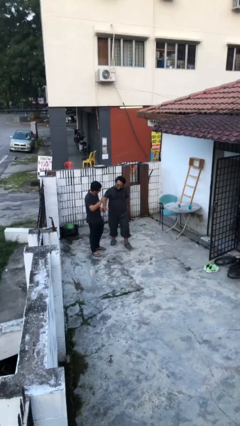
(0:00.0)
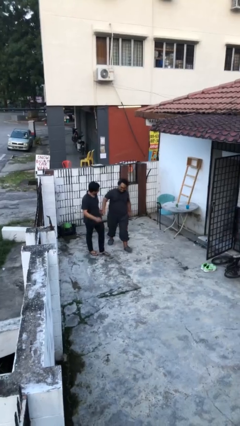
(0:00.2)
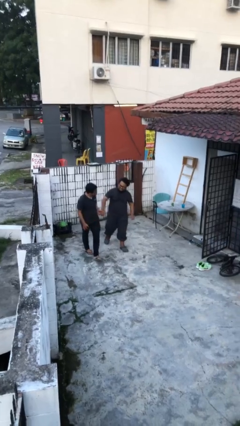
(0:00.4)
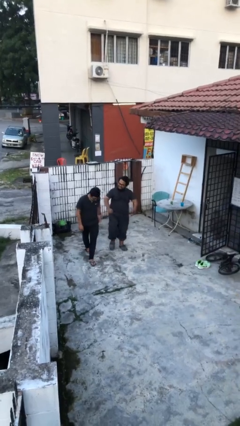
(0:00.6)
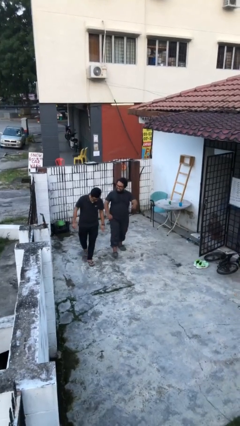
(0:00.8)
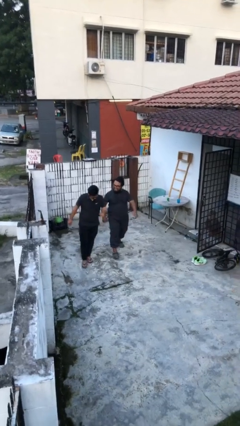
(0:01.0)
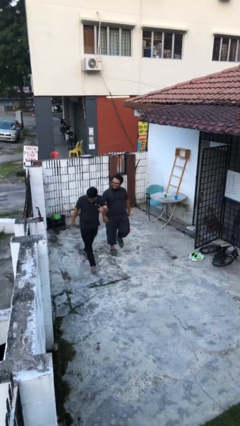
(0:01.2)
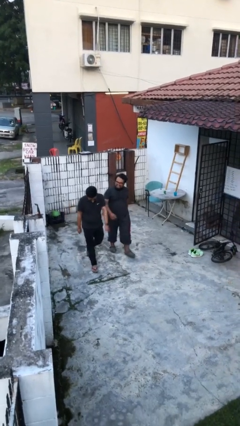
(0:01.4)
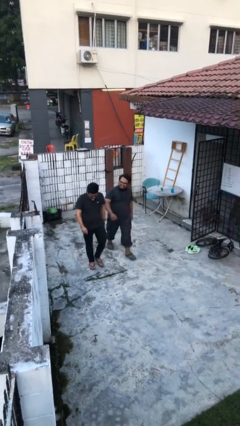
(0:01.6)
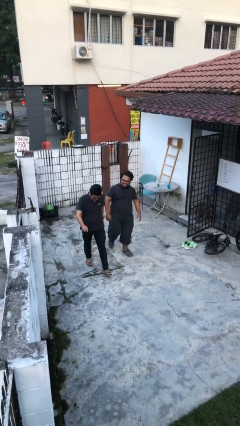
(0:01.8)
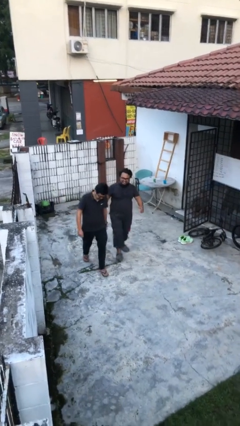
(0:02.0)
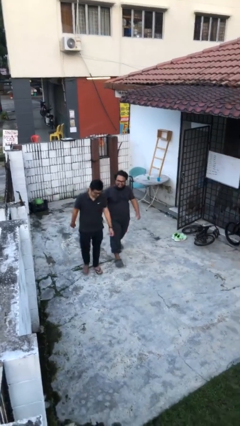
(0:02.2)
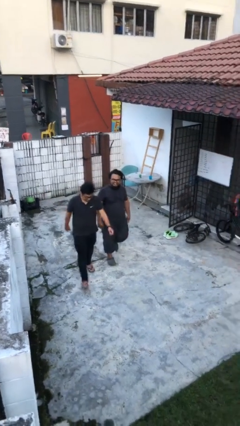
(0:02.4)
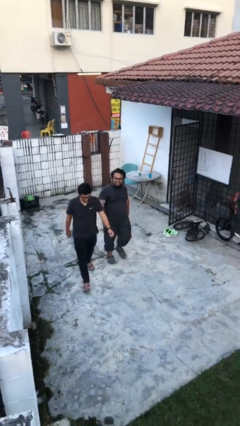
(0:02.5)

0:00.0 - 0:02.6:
person talks to person

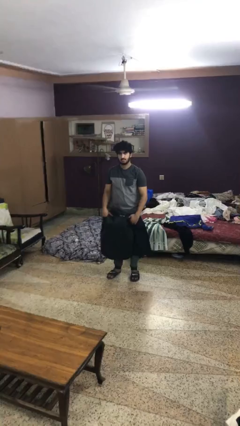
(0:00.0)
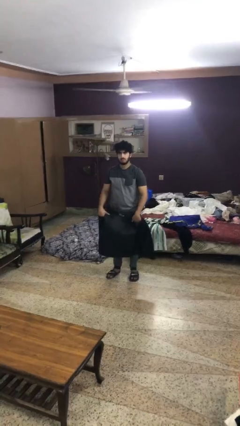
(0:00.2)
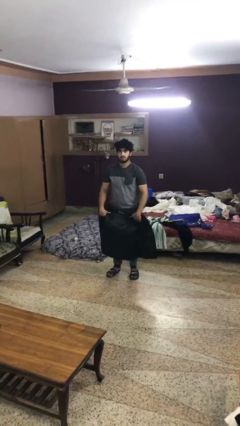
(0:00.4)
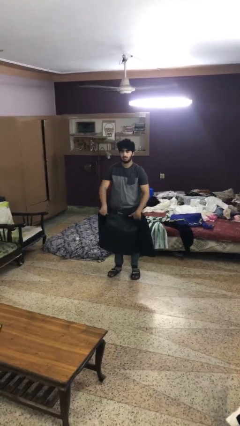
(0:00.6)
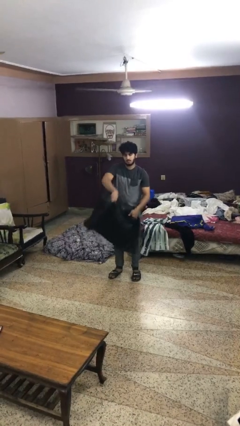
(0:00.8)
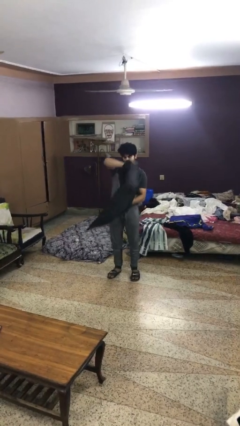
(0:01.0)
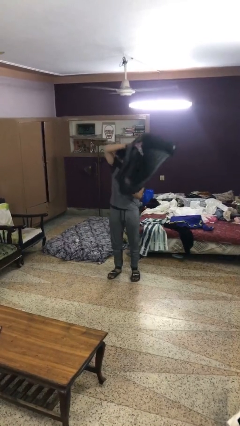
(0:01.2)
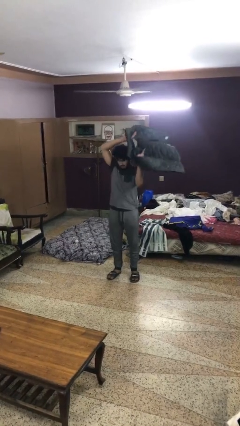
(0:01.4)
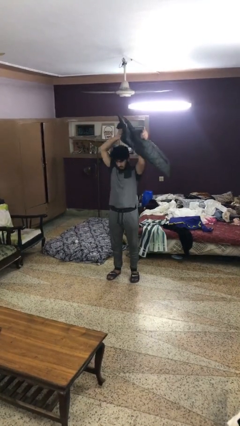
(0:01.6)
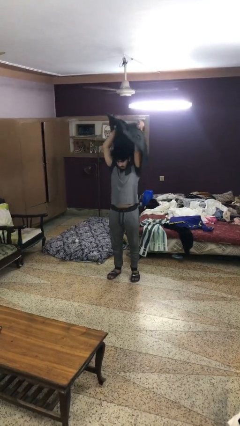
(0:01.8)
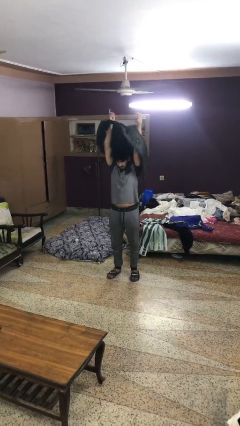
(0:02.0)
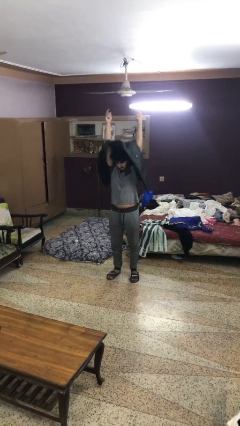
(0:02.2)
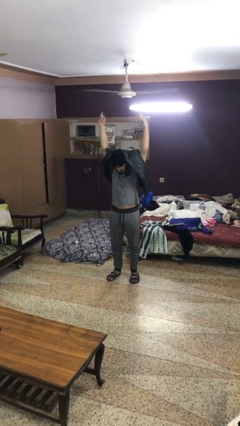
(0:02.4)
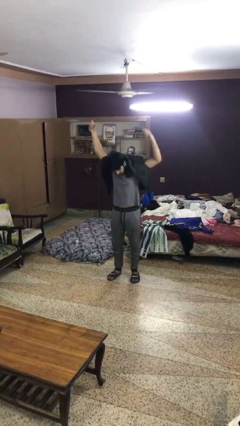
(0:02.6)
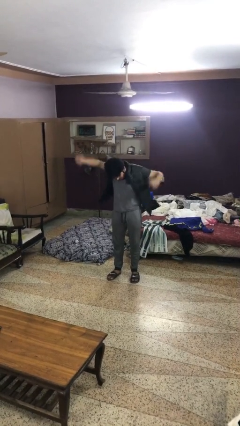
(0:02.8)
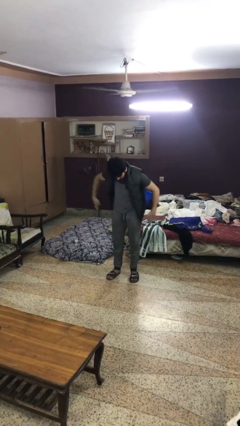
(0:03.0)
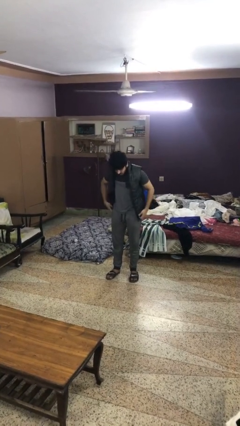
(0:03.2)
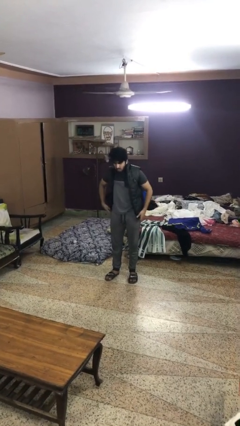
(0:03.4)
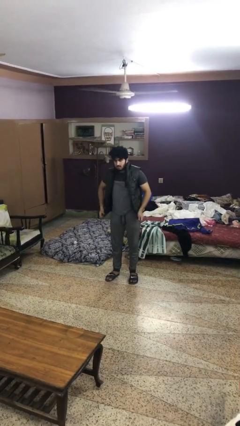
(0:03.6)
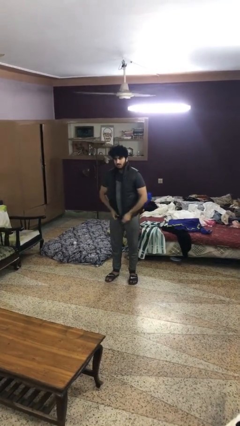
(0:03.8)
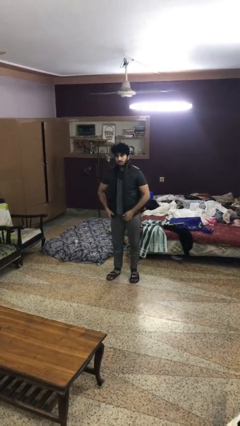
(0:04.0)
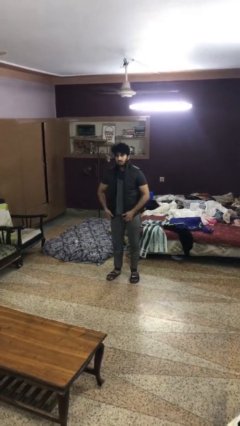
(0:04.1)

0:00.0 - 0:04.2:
person puts on jacket

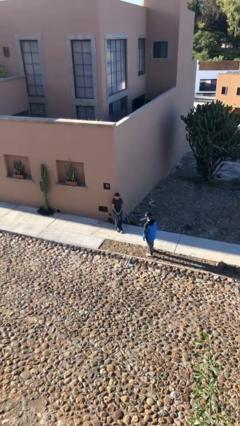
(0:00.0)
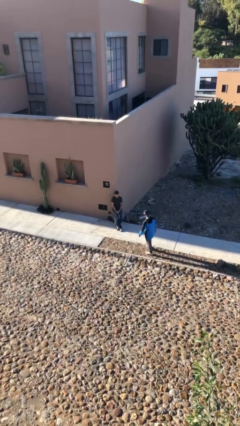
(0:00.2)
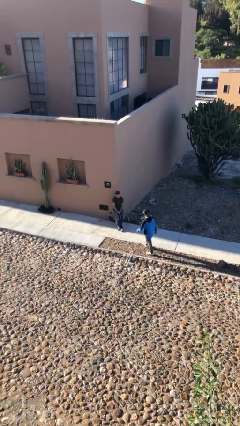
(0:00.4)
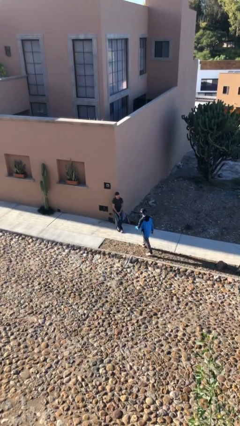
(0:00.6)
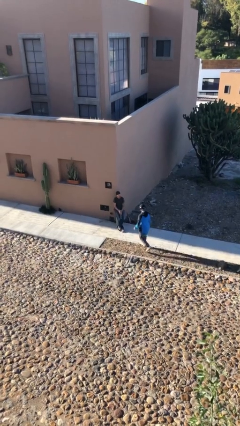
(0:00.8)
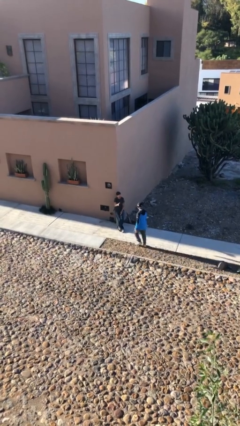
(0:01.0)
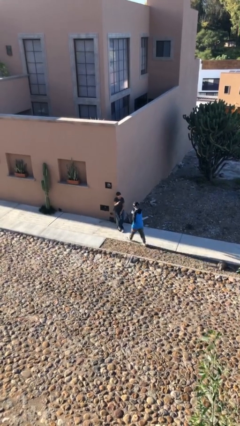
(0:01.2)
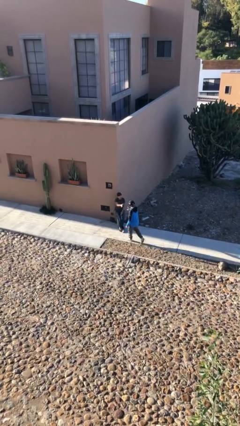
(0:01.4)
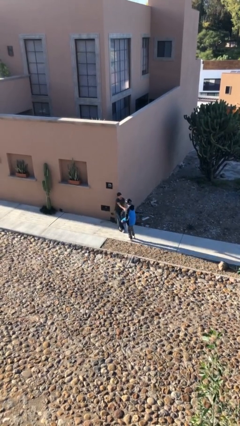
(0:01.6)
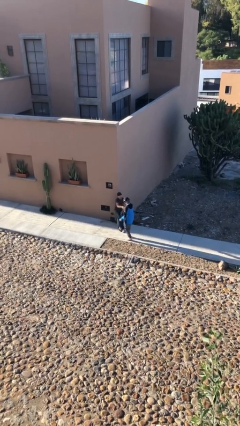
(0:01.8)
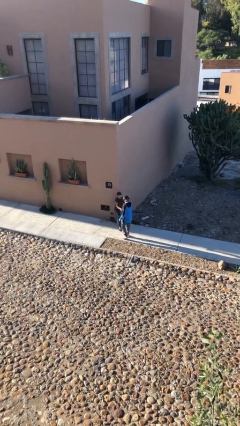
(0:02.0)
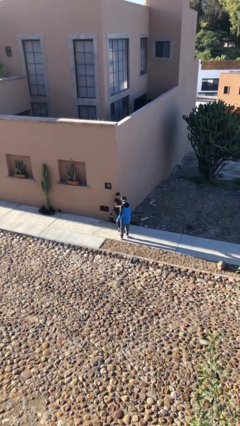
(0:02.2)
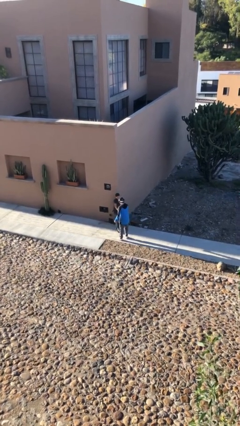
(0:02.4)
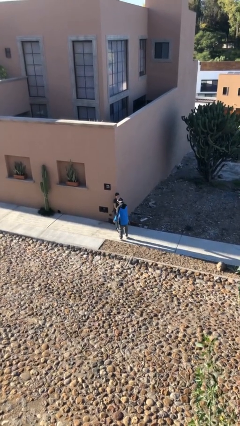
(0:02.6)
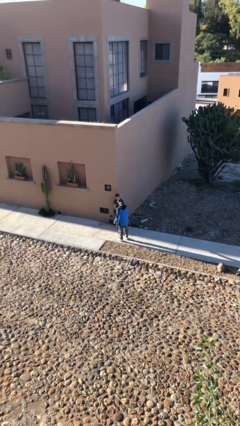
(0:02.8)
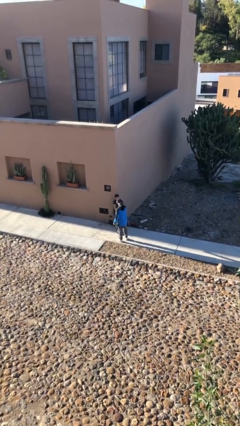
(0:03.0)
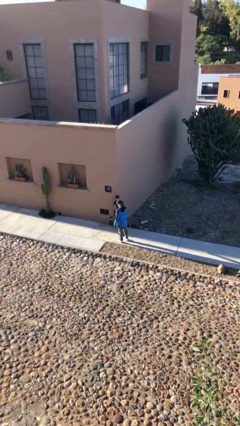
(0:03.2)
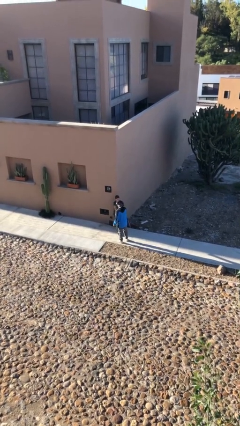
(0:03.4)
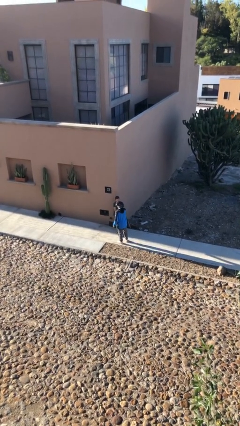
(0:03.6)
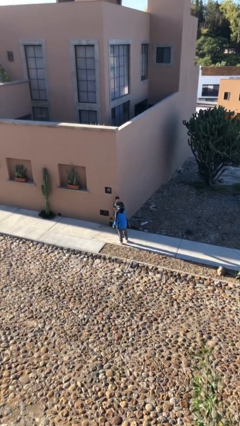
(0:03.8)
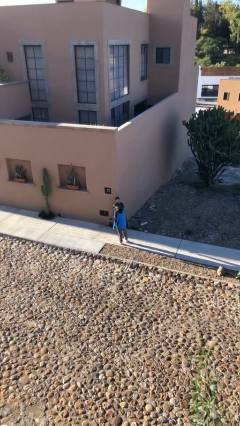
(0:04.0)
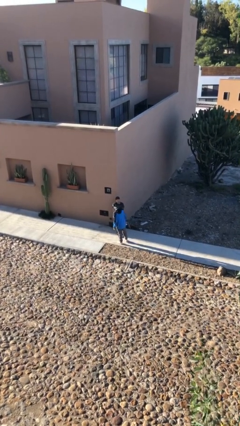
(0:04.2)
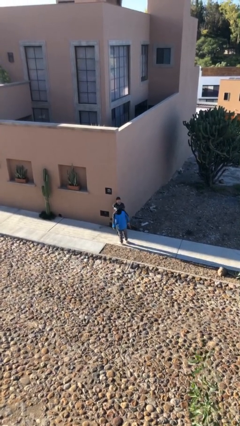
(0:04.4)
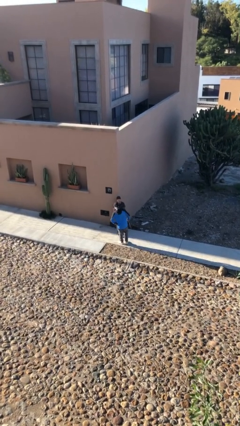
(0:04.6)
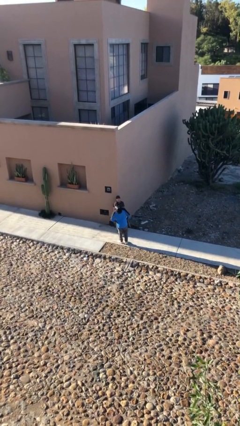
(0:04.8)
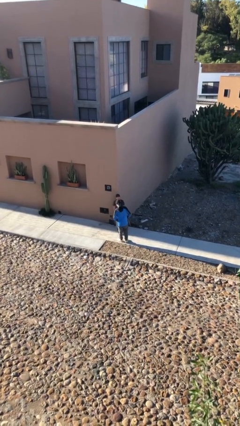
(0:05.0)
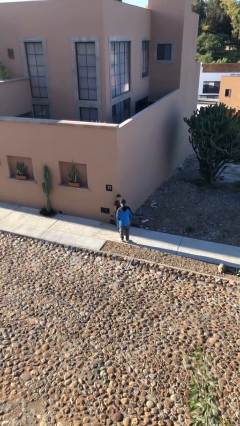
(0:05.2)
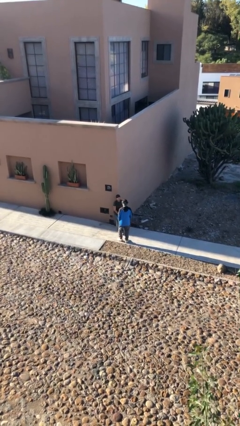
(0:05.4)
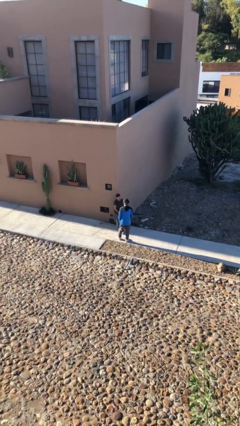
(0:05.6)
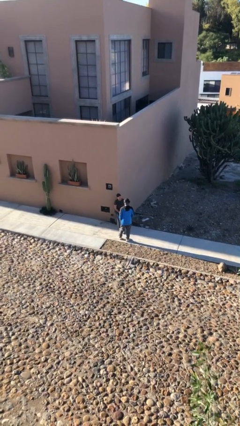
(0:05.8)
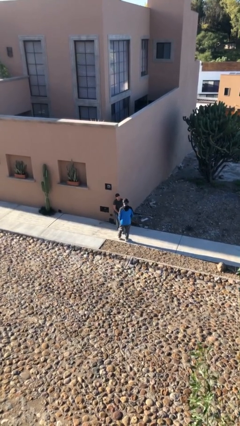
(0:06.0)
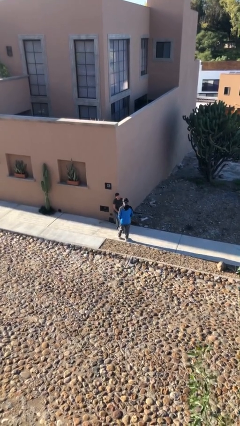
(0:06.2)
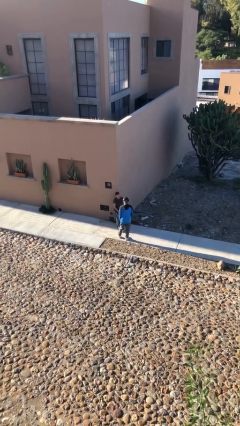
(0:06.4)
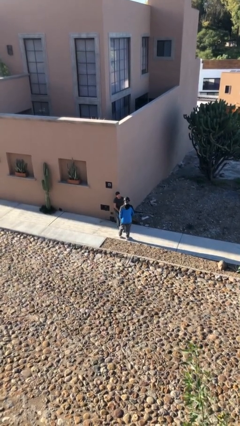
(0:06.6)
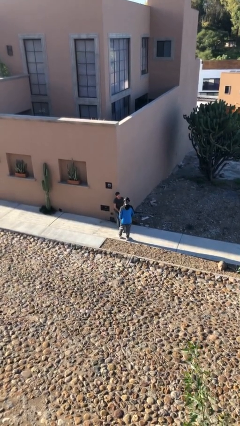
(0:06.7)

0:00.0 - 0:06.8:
person shakes hand

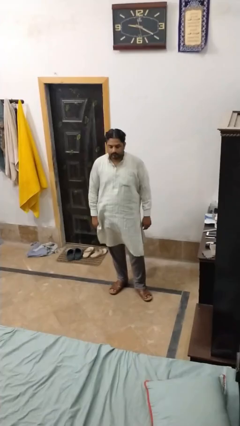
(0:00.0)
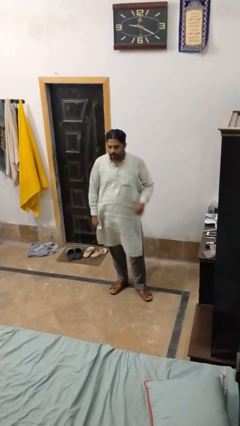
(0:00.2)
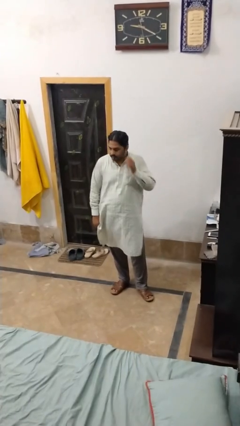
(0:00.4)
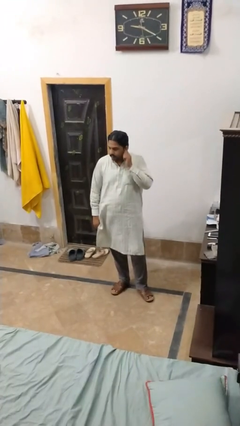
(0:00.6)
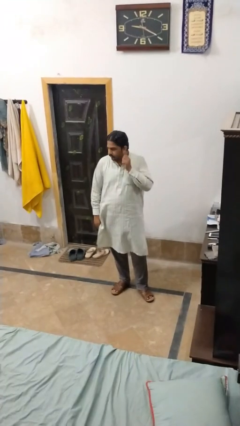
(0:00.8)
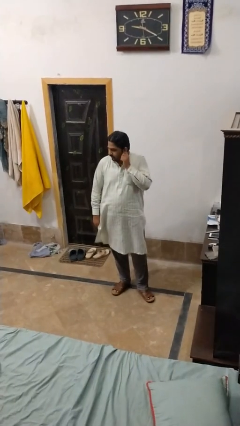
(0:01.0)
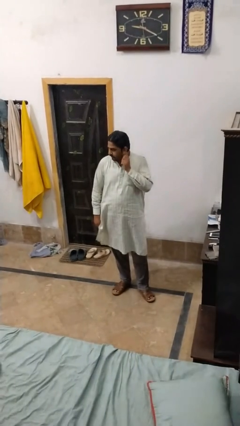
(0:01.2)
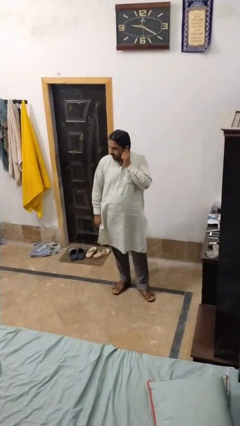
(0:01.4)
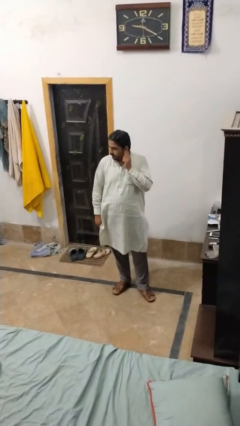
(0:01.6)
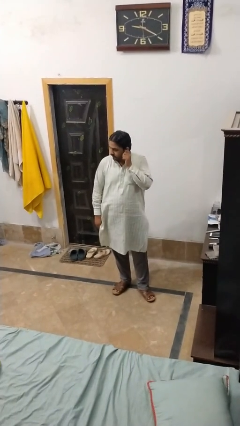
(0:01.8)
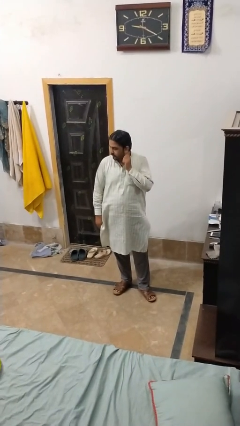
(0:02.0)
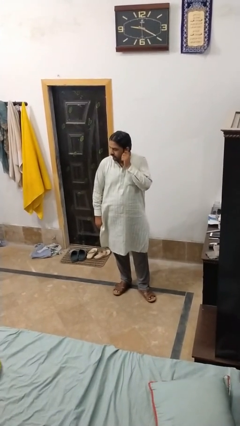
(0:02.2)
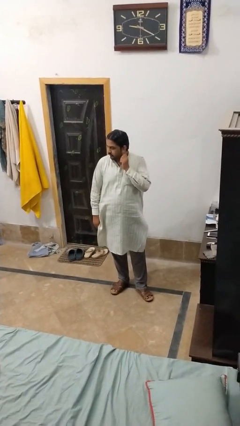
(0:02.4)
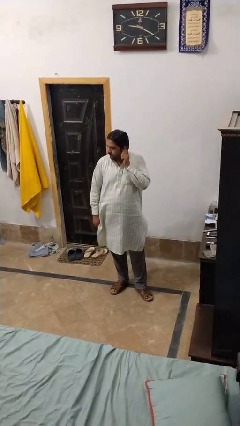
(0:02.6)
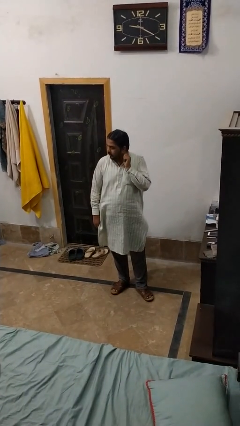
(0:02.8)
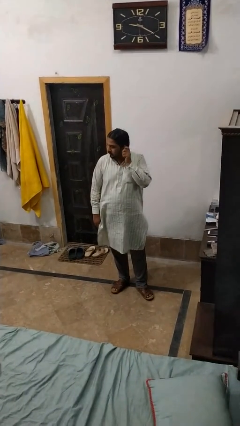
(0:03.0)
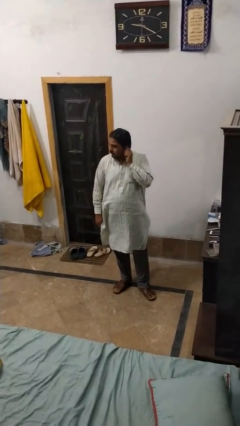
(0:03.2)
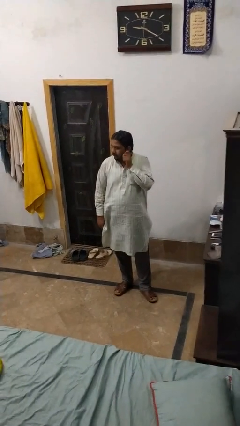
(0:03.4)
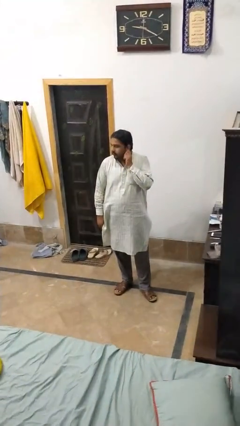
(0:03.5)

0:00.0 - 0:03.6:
person touches earlobe

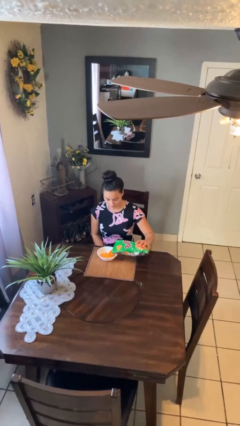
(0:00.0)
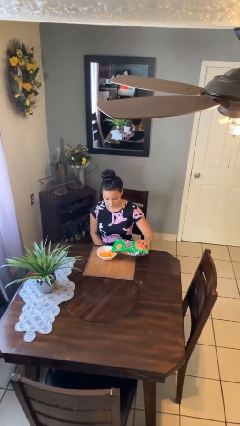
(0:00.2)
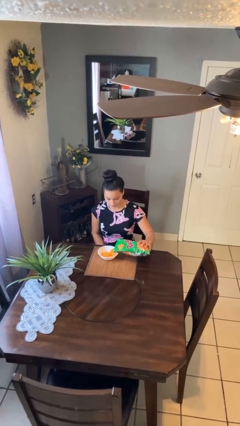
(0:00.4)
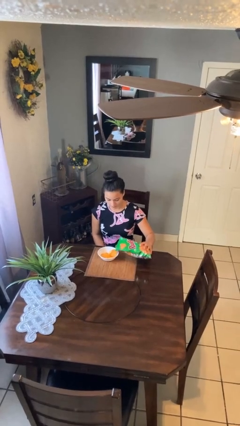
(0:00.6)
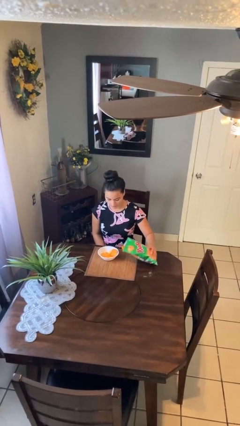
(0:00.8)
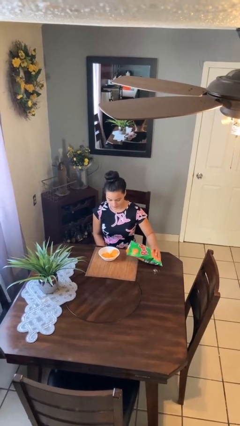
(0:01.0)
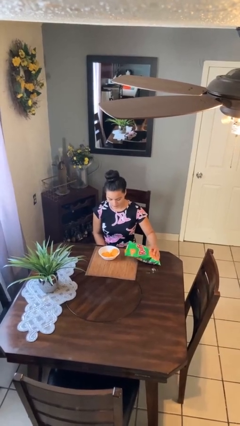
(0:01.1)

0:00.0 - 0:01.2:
person pours into bowl
